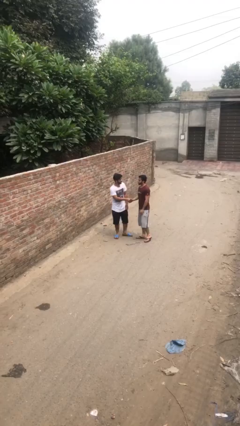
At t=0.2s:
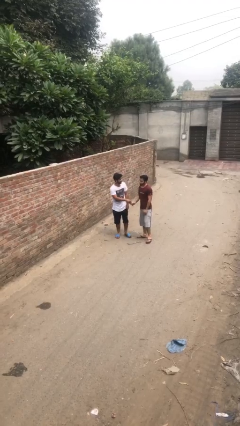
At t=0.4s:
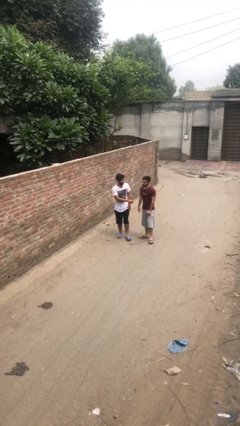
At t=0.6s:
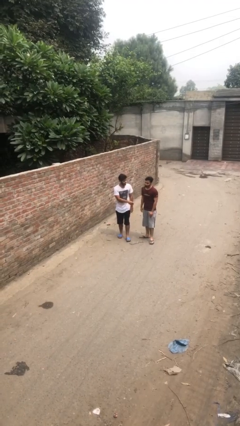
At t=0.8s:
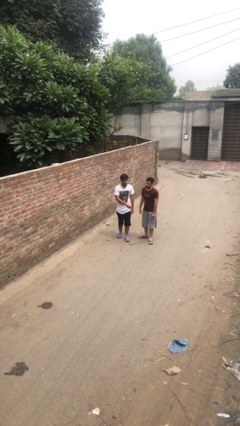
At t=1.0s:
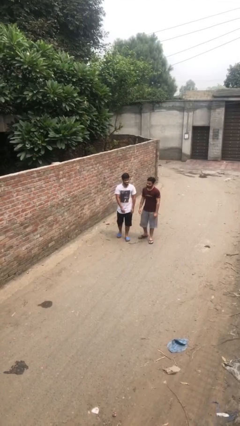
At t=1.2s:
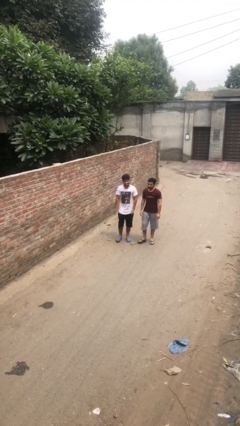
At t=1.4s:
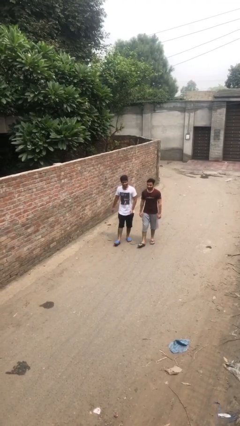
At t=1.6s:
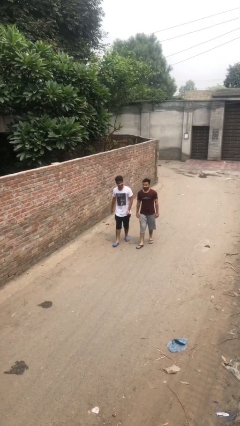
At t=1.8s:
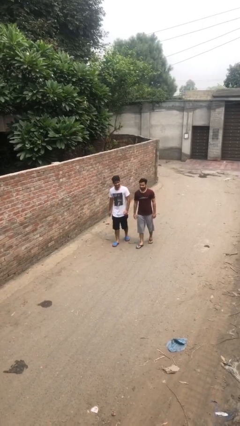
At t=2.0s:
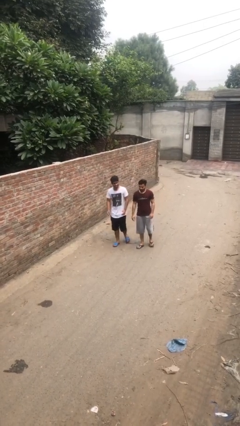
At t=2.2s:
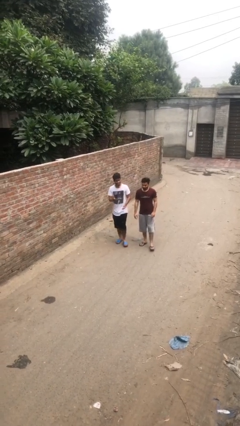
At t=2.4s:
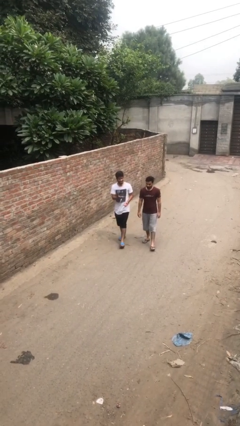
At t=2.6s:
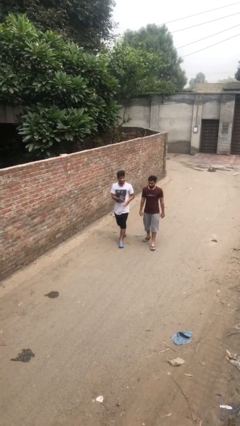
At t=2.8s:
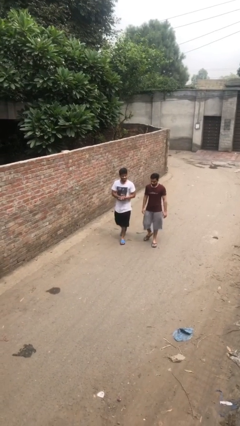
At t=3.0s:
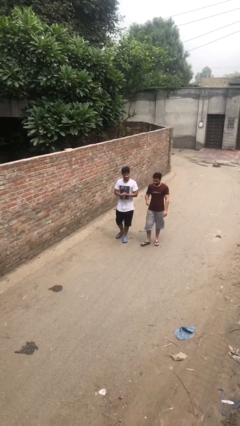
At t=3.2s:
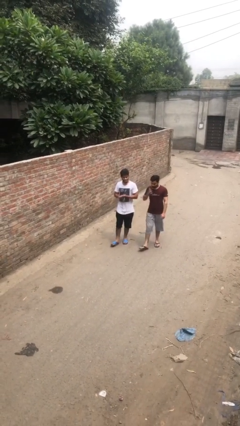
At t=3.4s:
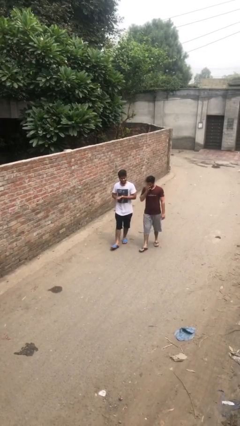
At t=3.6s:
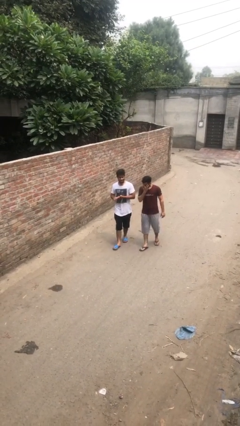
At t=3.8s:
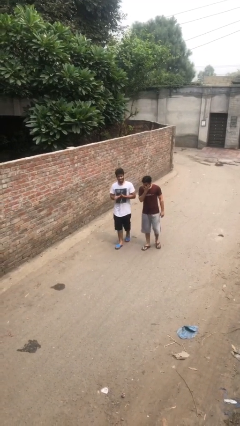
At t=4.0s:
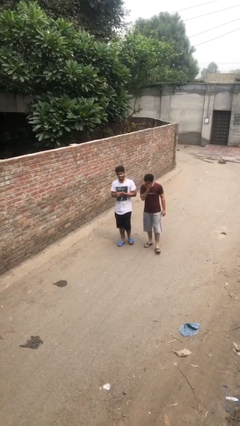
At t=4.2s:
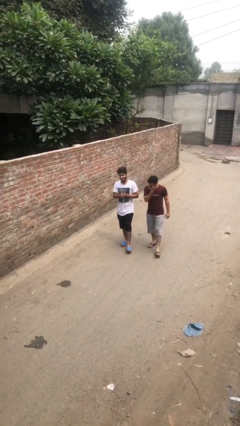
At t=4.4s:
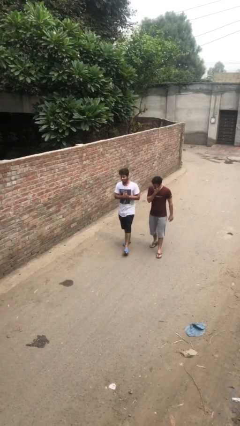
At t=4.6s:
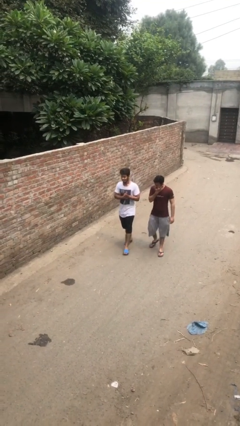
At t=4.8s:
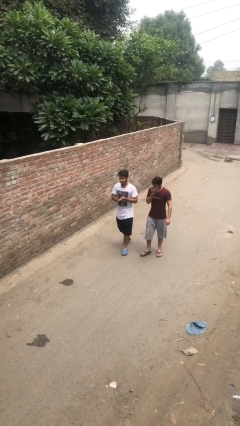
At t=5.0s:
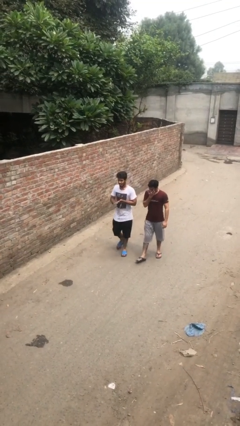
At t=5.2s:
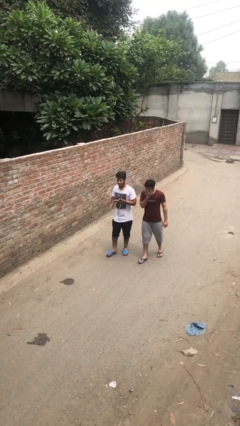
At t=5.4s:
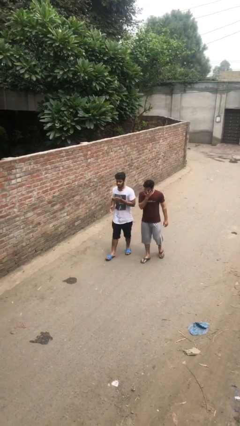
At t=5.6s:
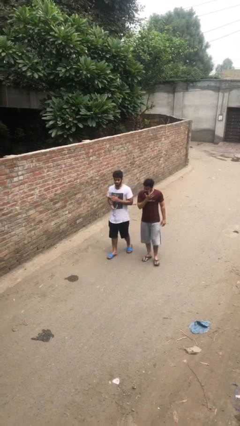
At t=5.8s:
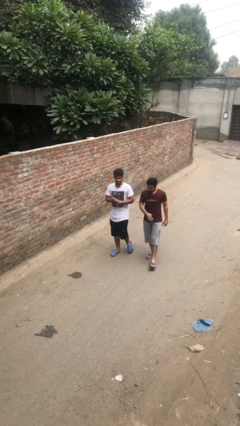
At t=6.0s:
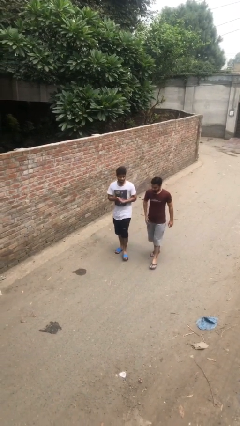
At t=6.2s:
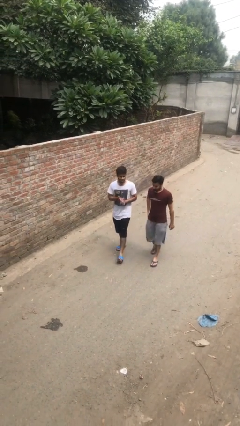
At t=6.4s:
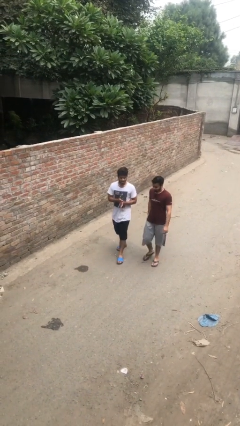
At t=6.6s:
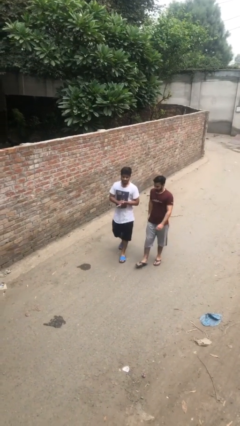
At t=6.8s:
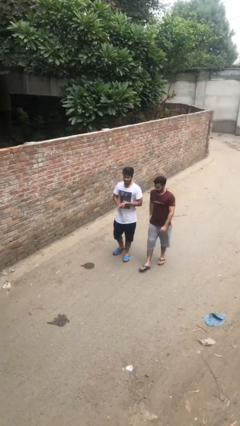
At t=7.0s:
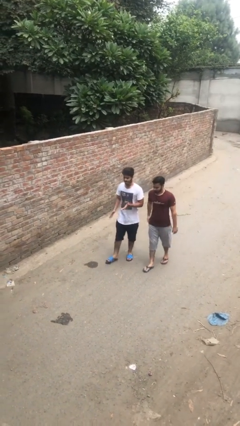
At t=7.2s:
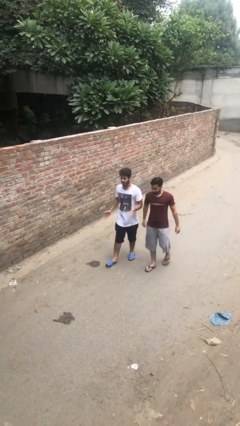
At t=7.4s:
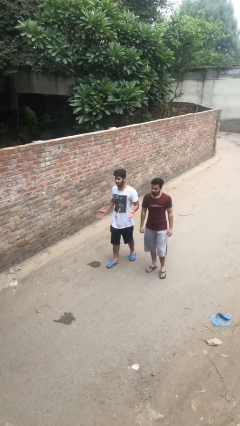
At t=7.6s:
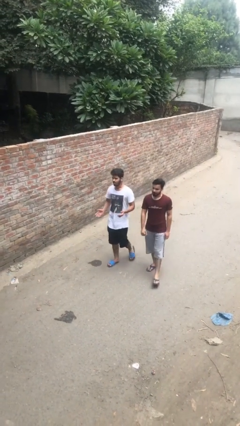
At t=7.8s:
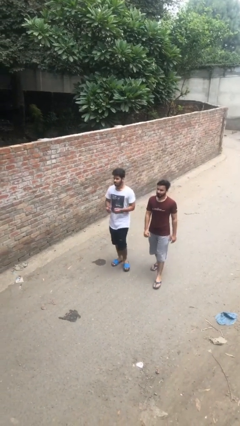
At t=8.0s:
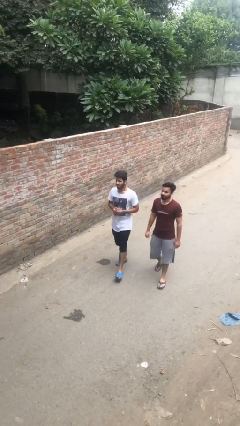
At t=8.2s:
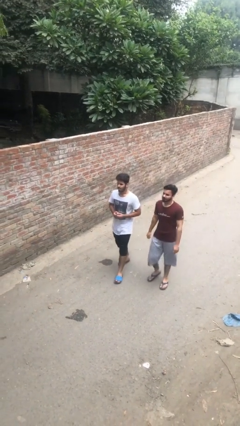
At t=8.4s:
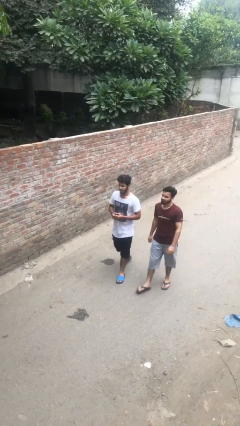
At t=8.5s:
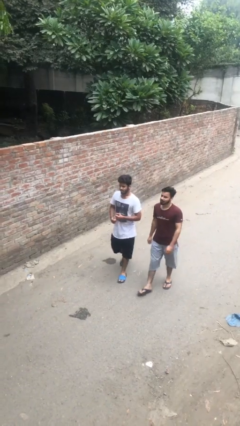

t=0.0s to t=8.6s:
person talks to person

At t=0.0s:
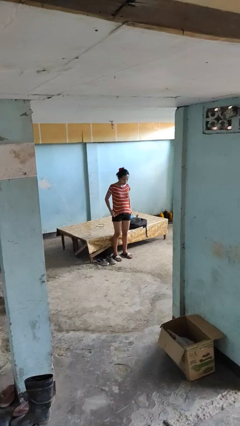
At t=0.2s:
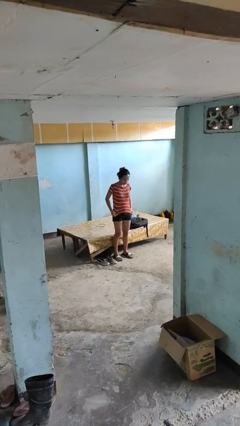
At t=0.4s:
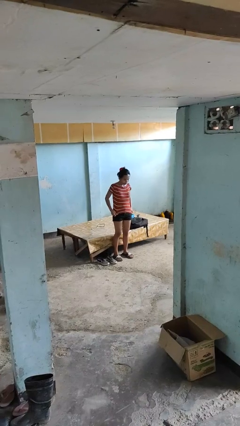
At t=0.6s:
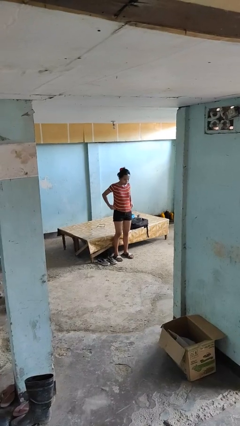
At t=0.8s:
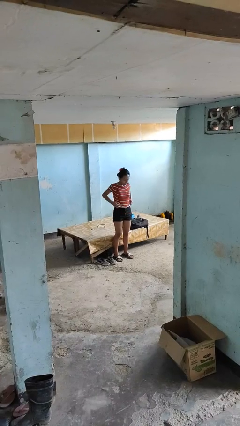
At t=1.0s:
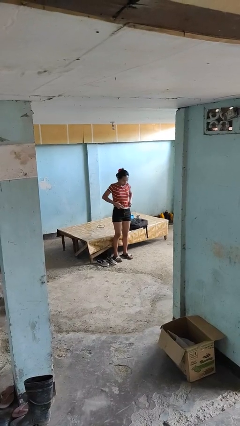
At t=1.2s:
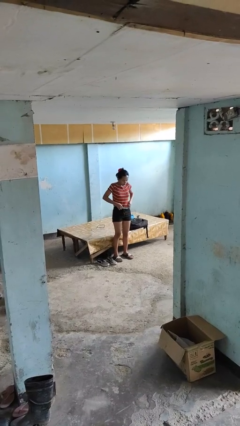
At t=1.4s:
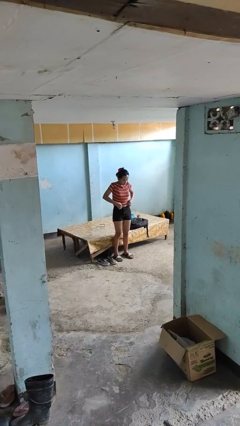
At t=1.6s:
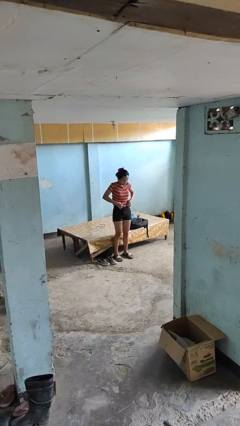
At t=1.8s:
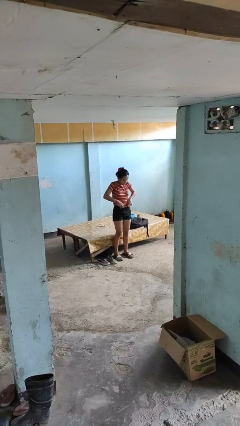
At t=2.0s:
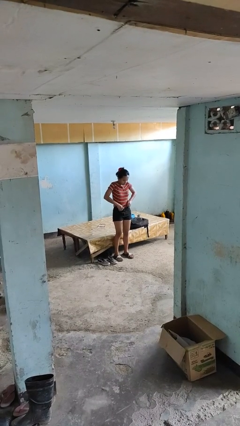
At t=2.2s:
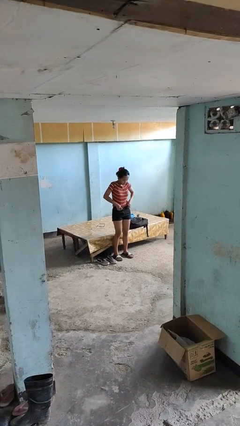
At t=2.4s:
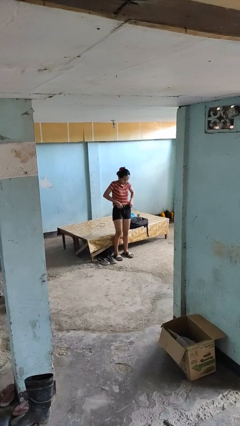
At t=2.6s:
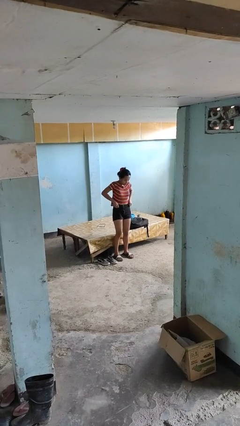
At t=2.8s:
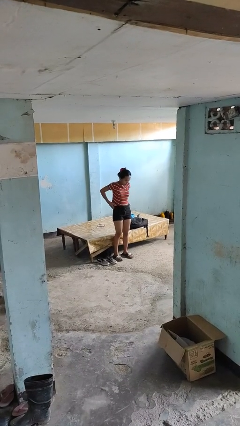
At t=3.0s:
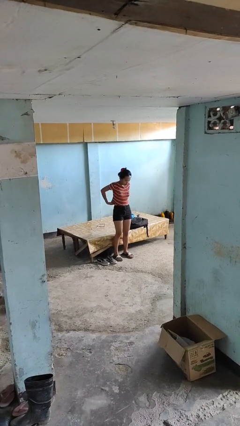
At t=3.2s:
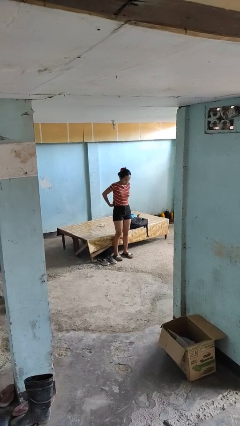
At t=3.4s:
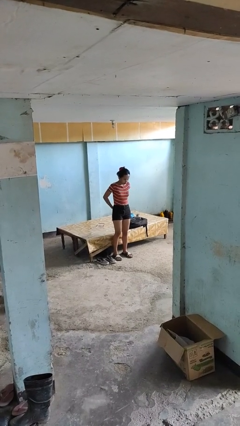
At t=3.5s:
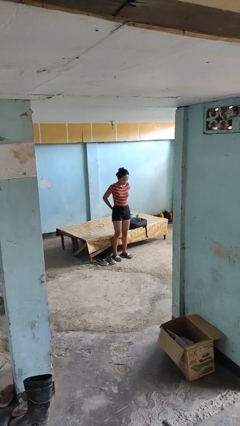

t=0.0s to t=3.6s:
person tucks in shirt

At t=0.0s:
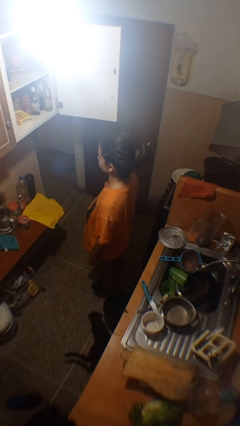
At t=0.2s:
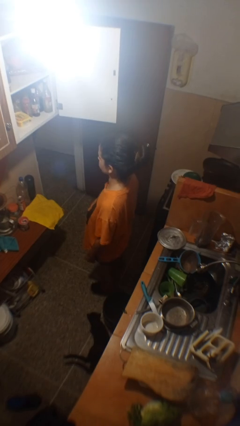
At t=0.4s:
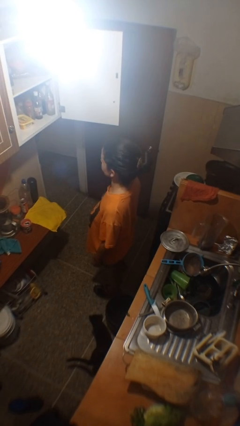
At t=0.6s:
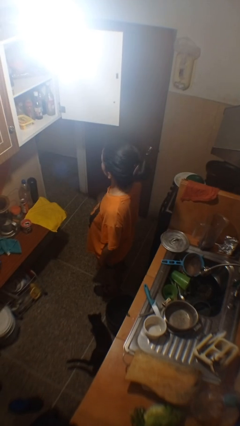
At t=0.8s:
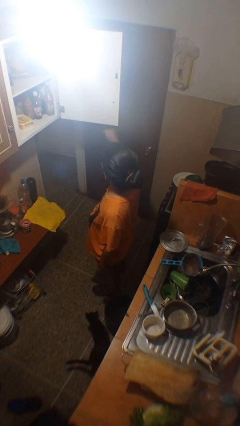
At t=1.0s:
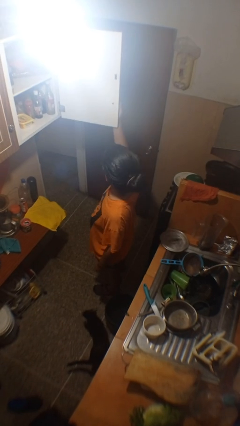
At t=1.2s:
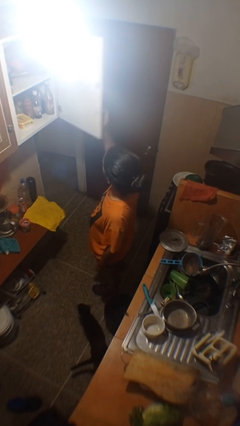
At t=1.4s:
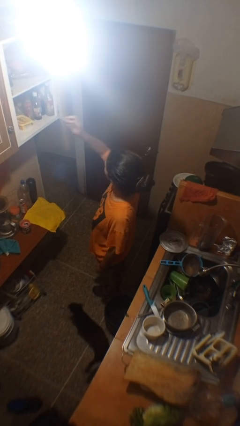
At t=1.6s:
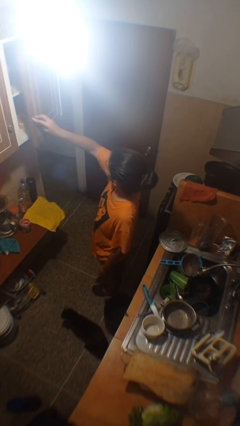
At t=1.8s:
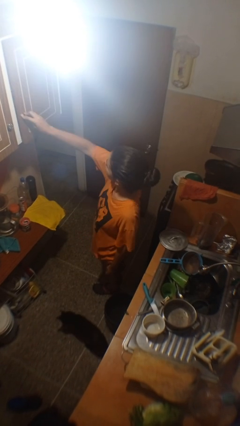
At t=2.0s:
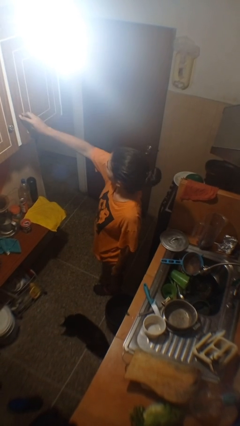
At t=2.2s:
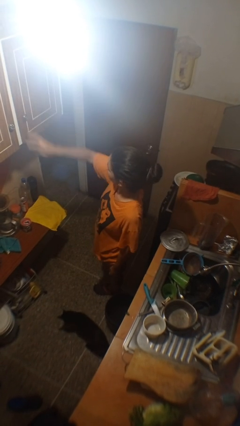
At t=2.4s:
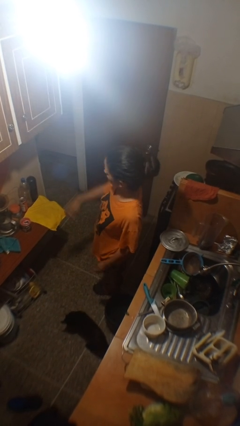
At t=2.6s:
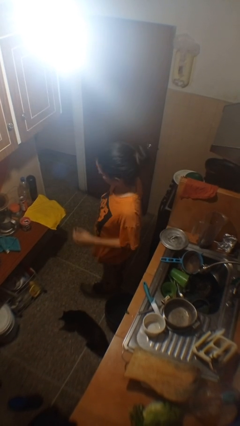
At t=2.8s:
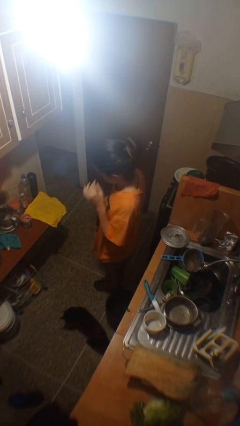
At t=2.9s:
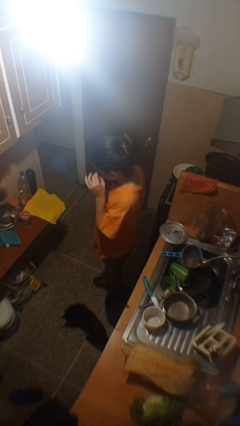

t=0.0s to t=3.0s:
person closes cabinet

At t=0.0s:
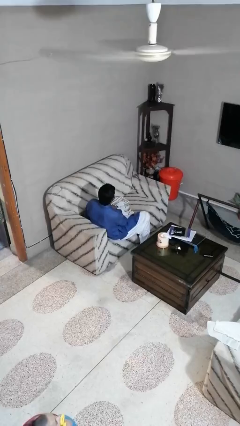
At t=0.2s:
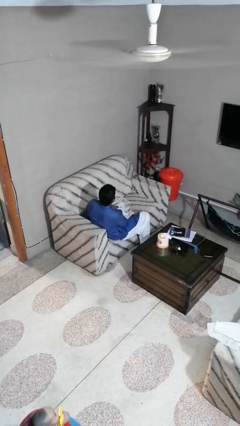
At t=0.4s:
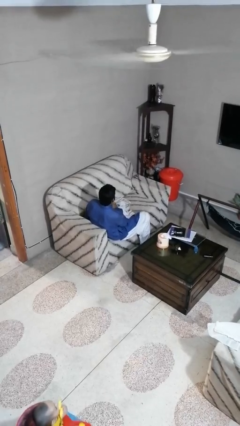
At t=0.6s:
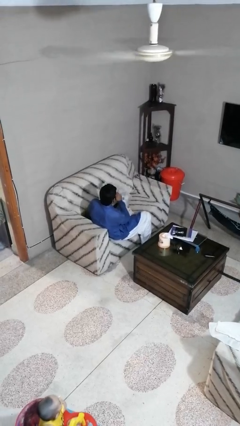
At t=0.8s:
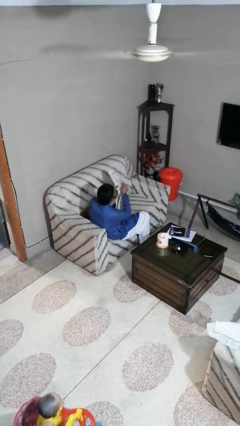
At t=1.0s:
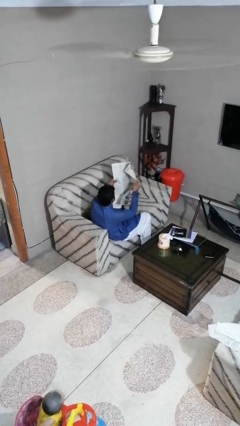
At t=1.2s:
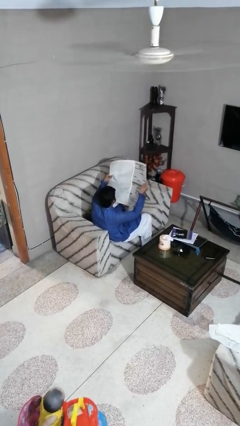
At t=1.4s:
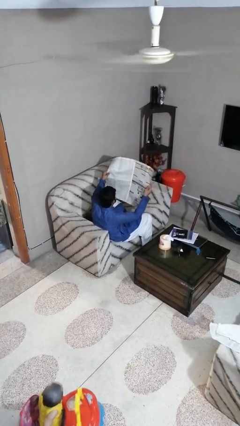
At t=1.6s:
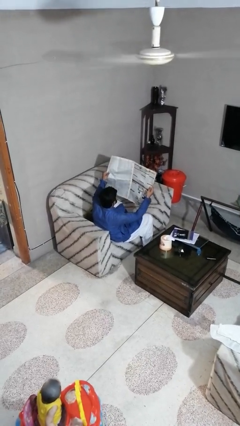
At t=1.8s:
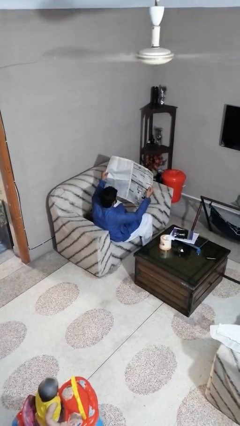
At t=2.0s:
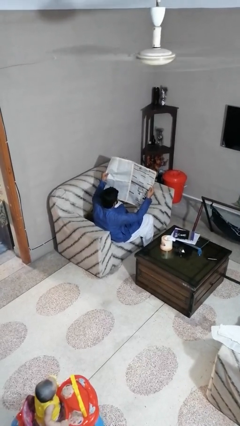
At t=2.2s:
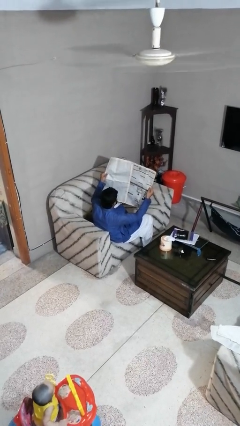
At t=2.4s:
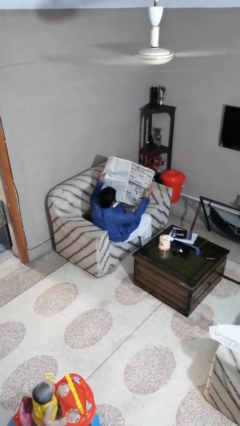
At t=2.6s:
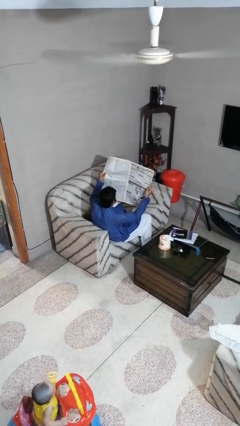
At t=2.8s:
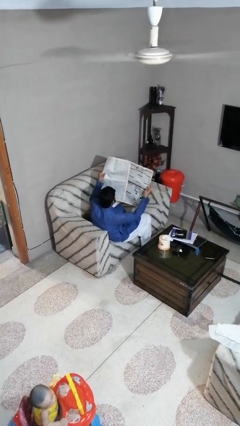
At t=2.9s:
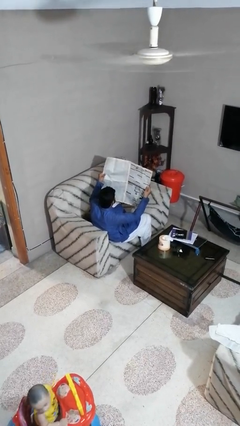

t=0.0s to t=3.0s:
person reads newspaper
